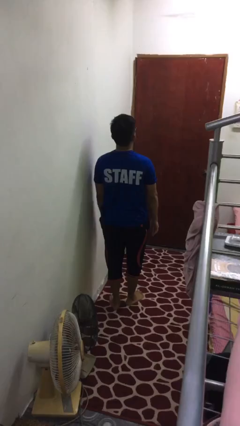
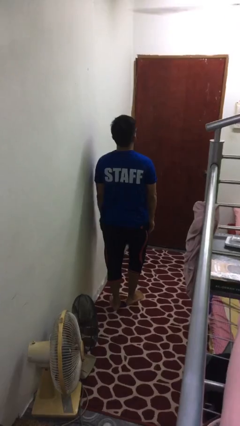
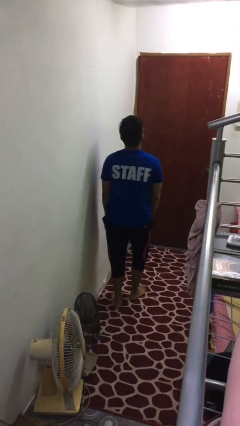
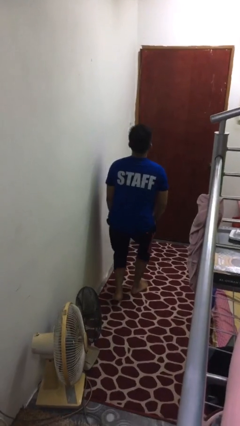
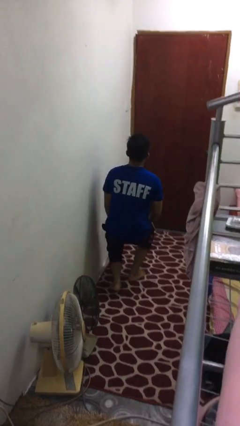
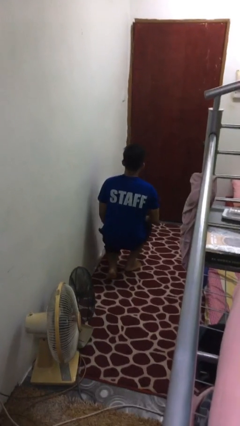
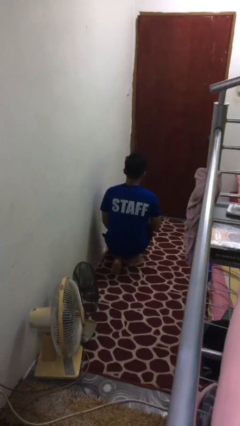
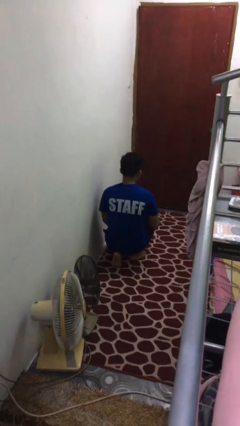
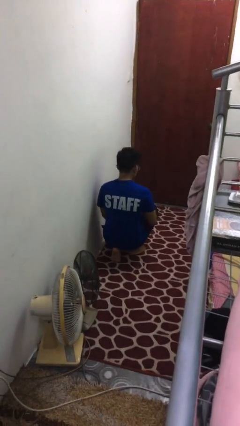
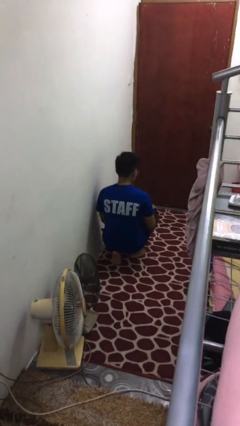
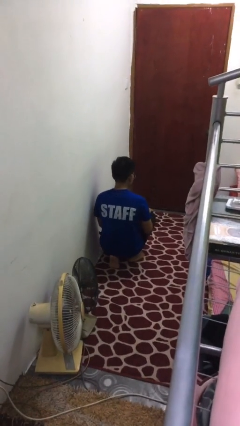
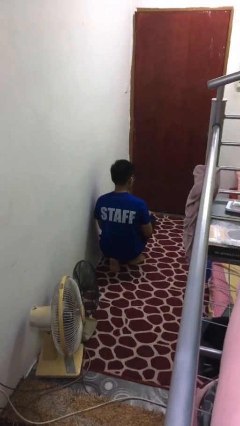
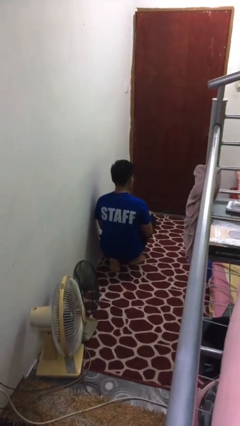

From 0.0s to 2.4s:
person kneels

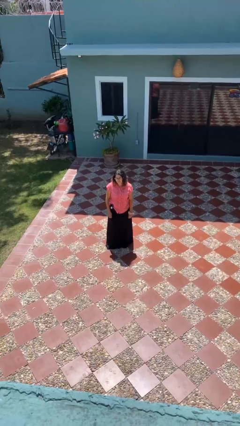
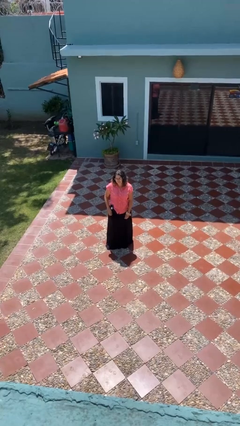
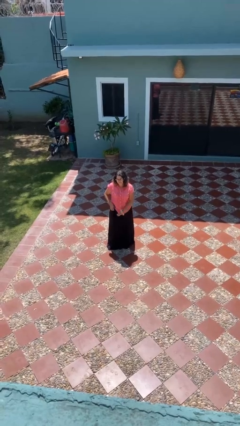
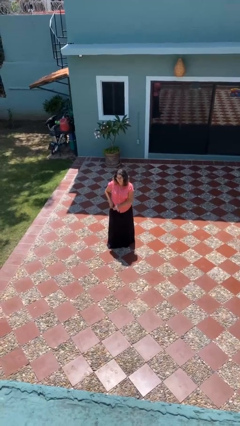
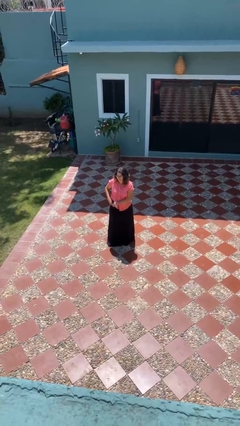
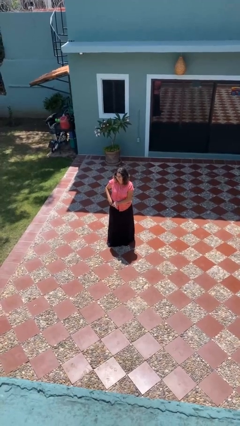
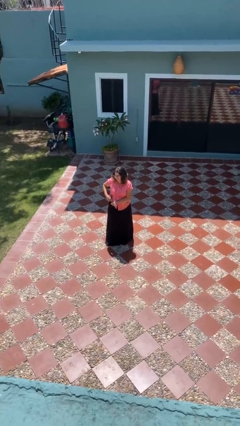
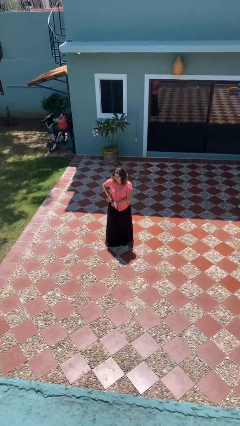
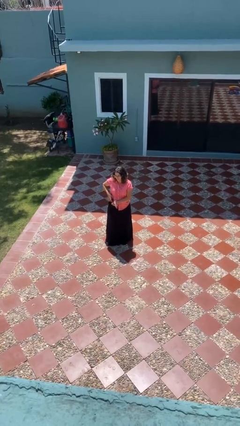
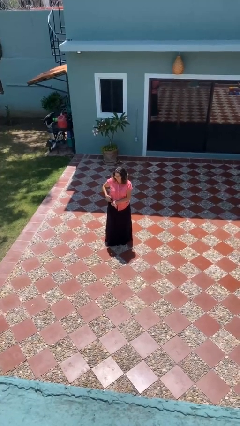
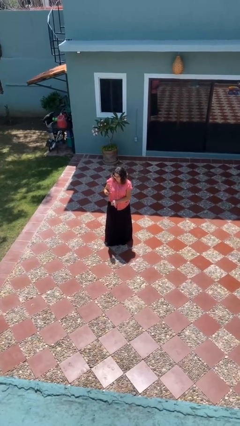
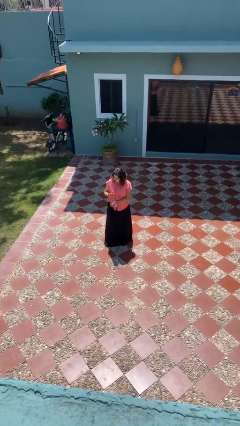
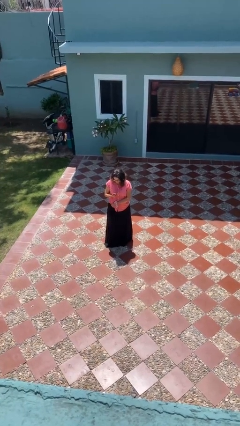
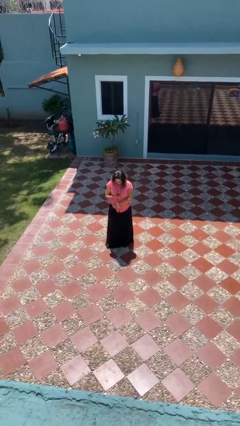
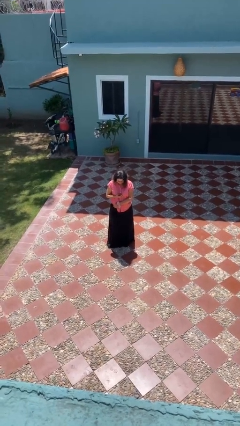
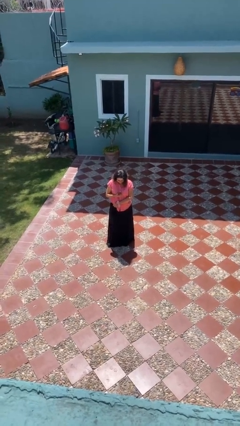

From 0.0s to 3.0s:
person takes phone from pocket

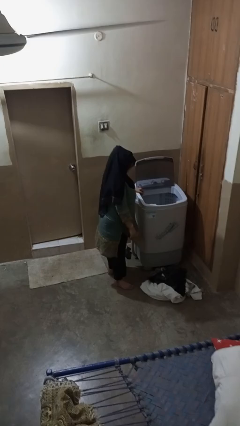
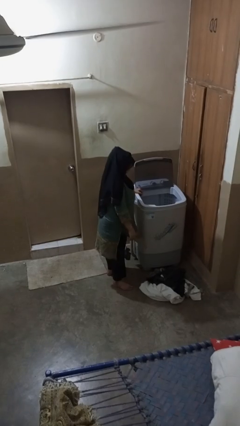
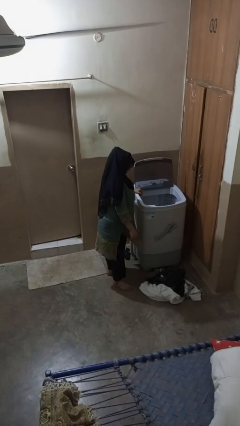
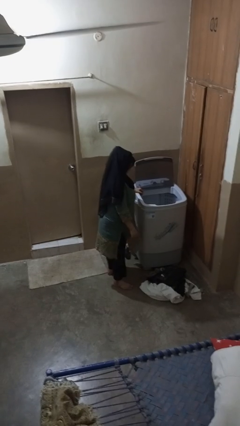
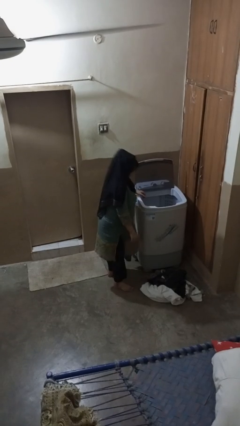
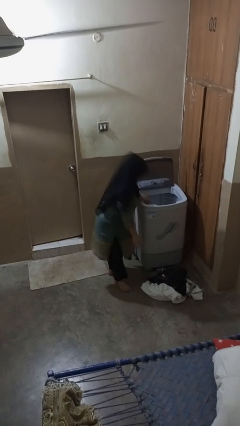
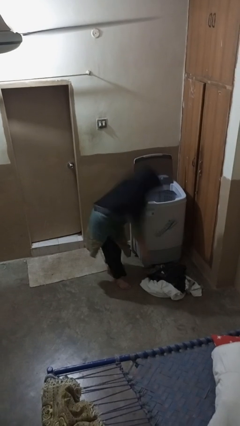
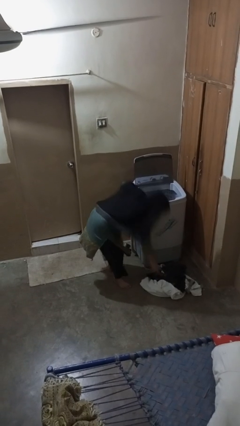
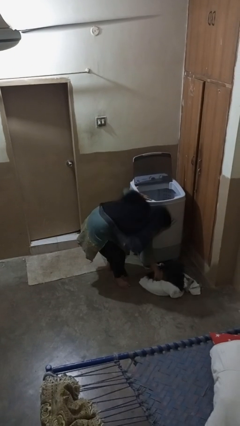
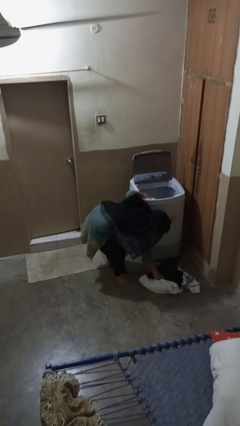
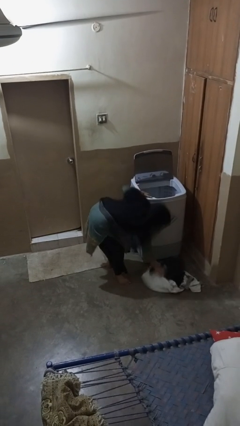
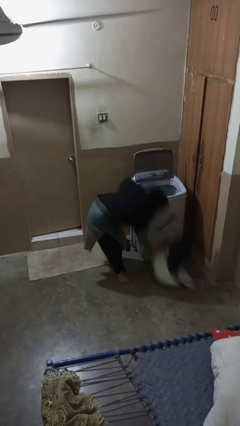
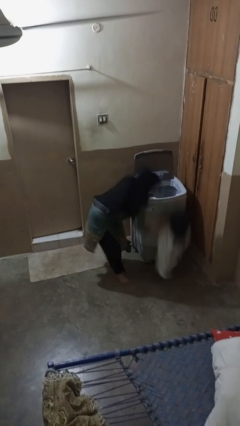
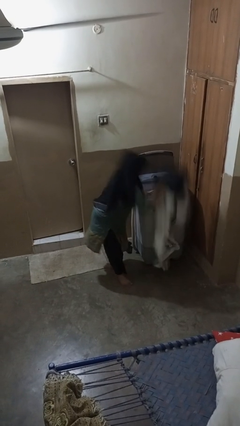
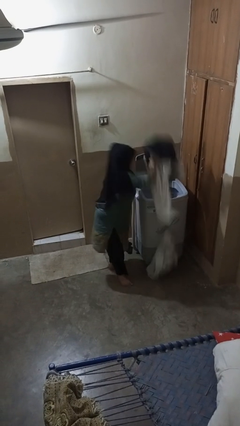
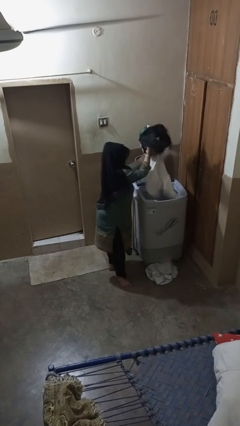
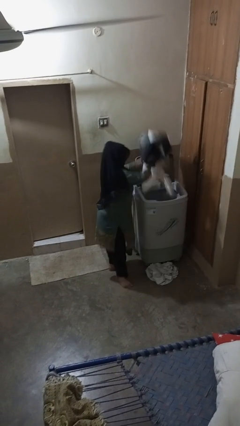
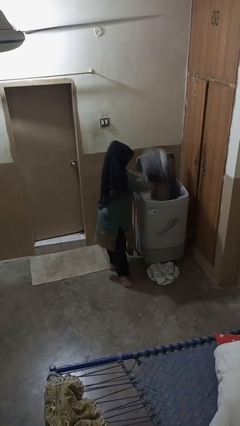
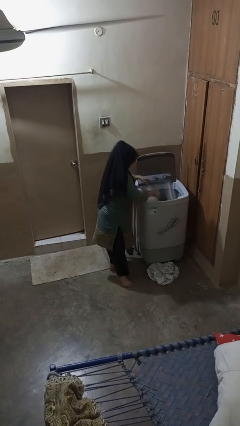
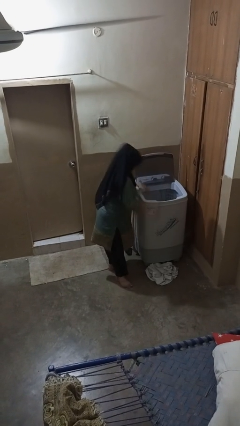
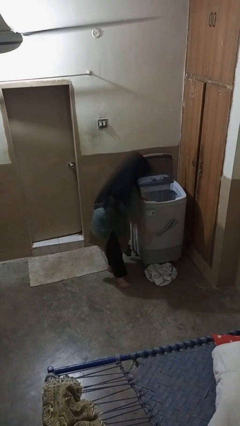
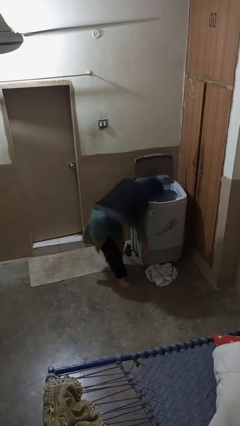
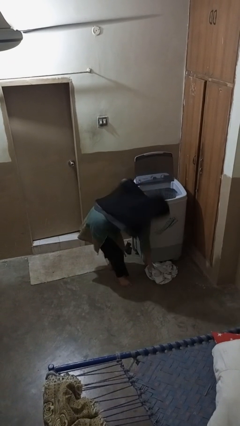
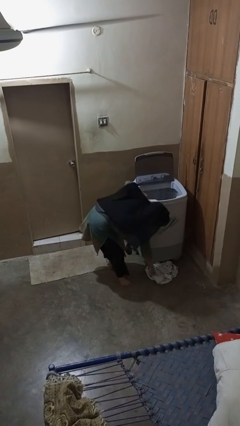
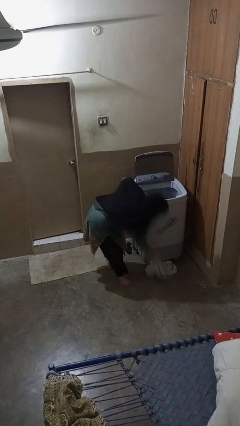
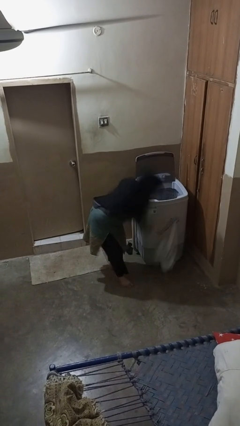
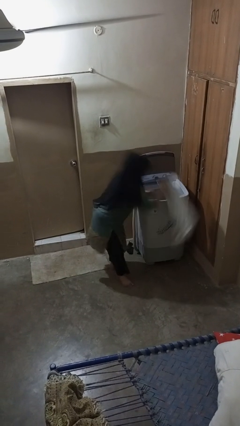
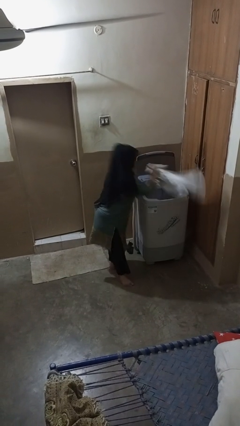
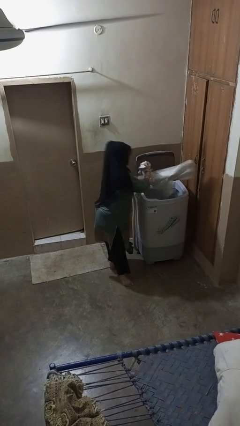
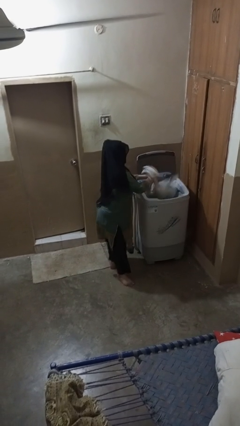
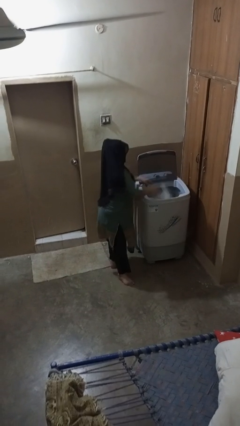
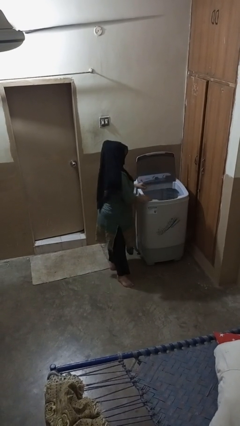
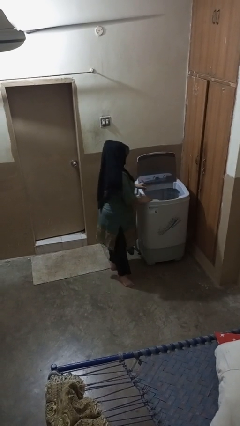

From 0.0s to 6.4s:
person loads clotheswasher

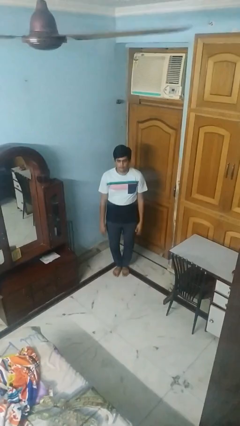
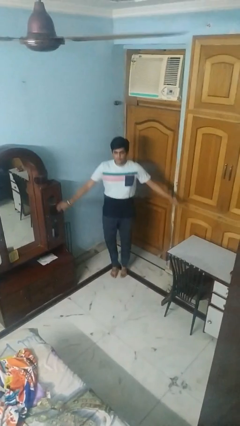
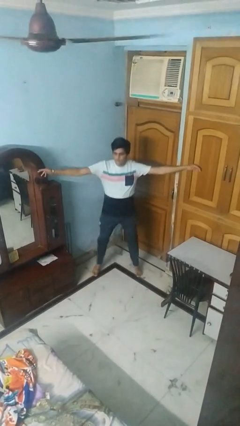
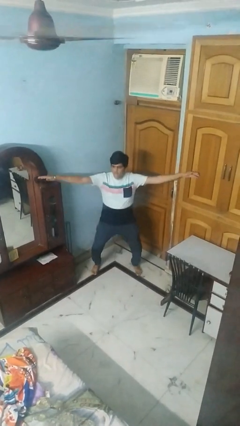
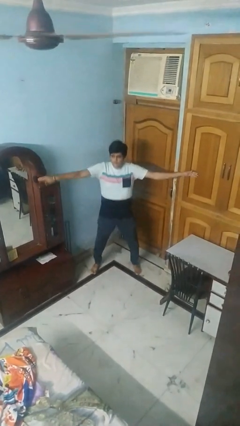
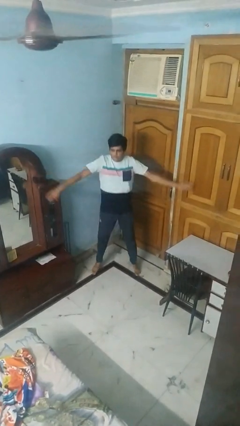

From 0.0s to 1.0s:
person exercises with jumping jacks

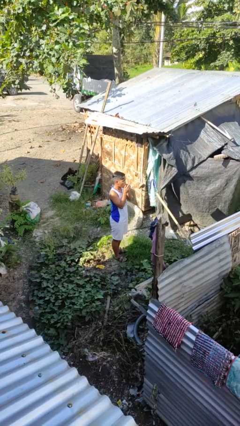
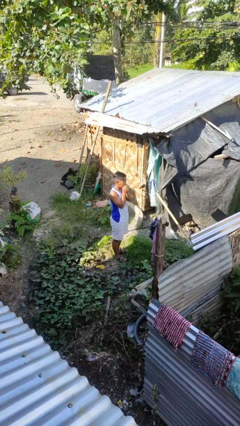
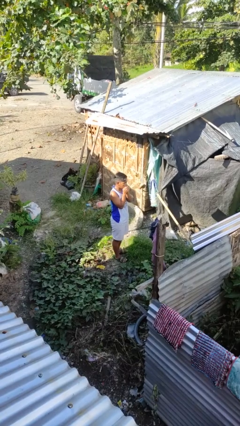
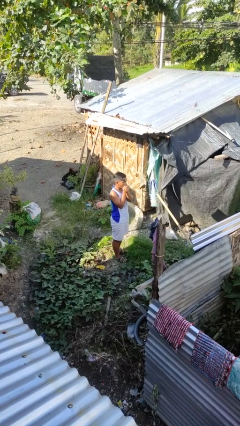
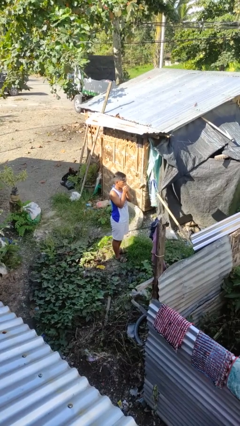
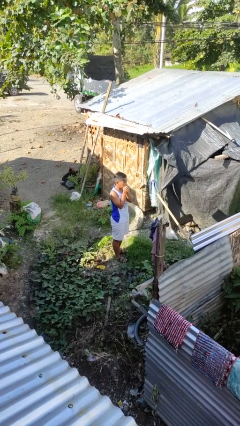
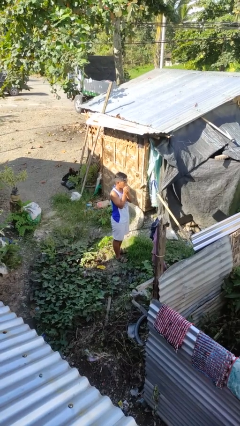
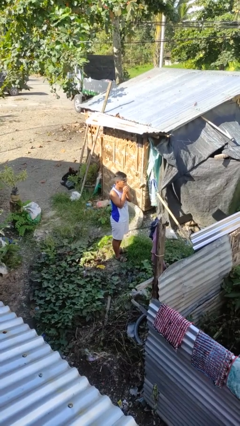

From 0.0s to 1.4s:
person blows into hands

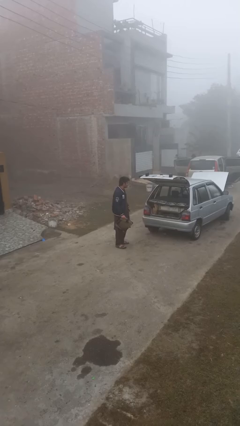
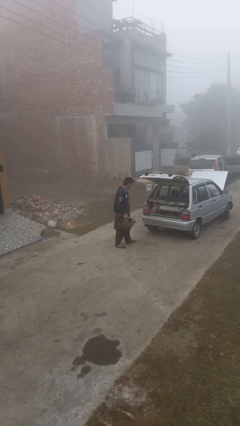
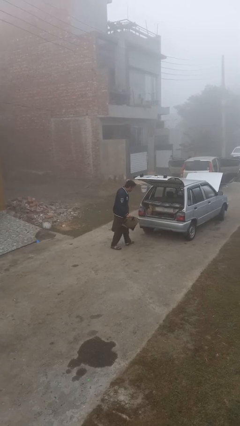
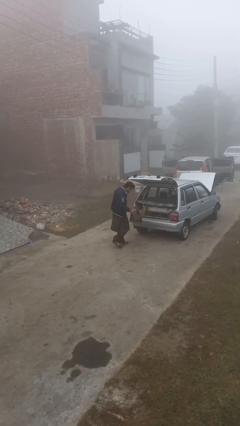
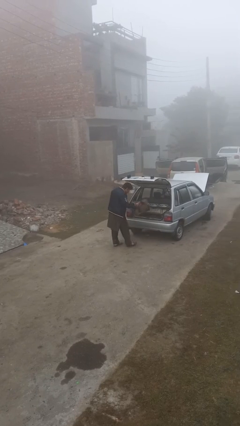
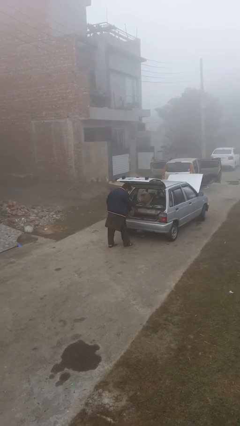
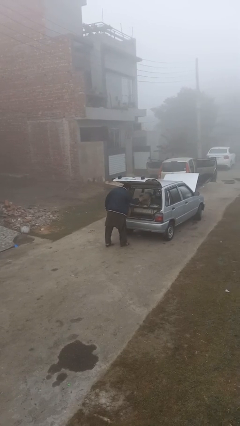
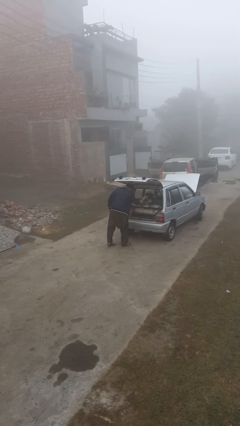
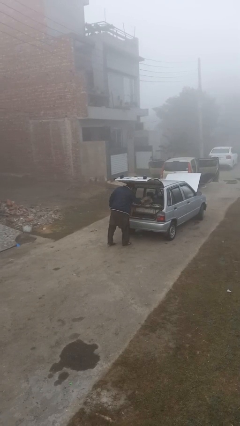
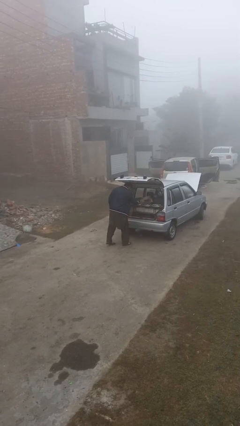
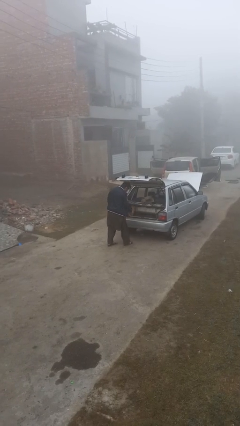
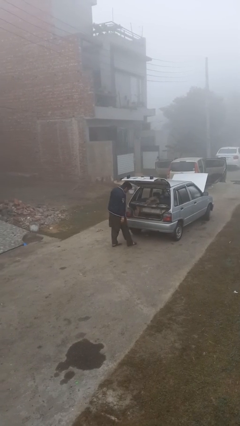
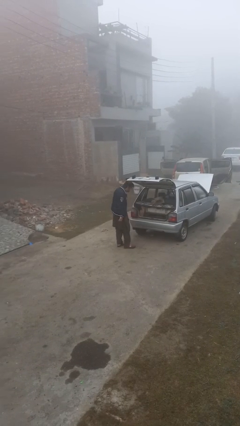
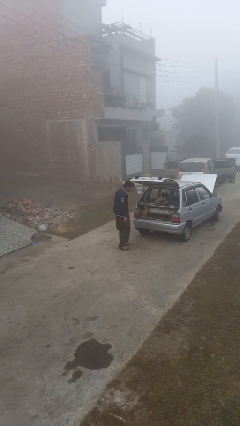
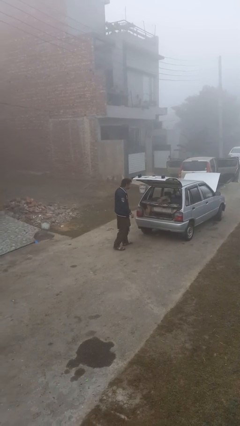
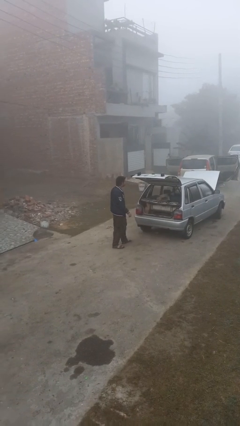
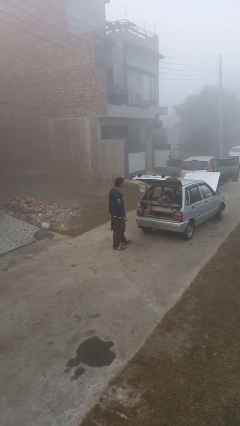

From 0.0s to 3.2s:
person loads car

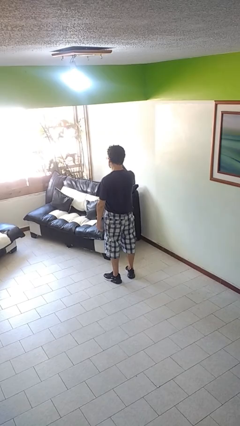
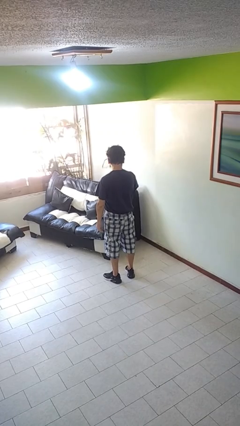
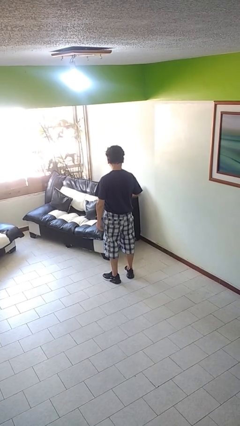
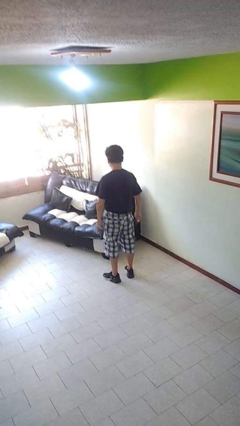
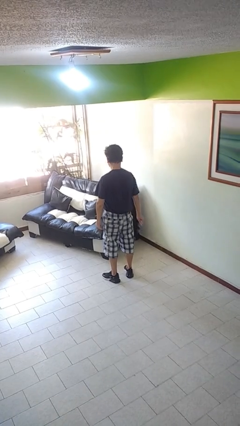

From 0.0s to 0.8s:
person takes off glasses
